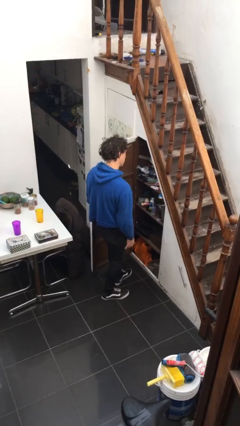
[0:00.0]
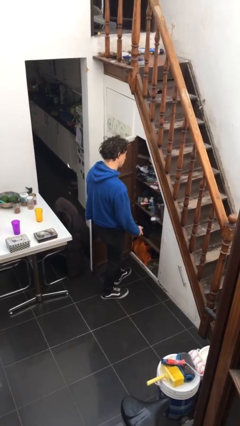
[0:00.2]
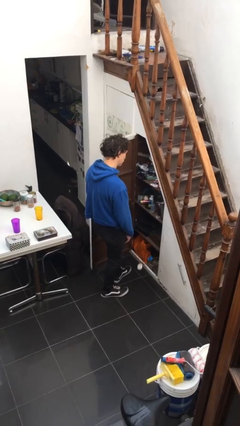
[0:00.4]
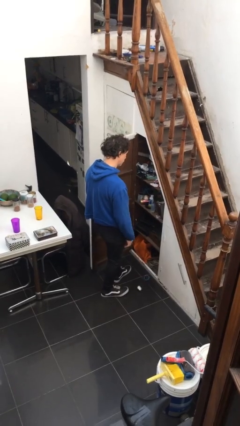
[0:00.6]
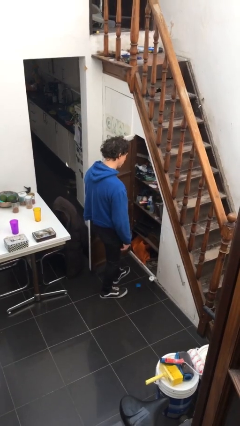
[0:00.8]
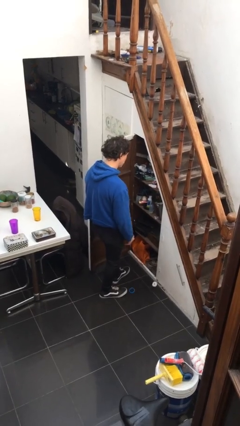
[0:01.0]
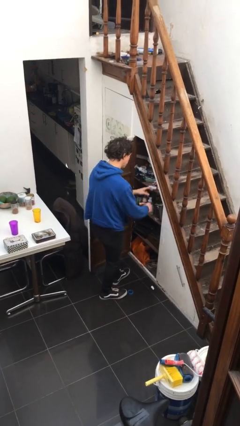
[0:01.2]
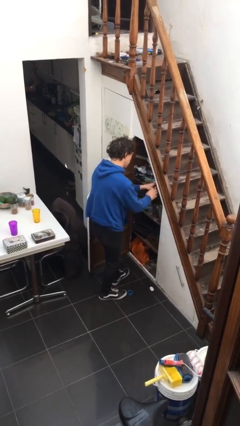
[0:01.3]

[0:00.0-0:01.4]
person searches in cabinet

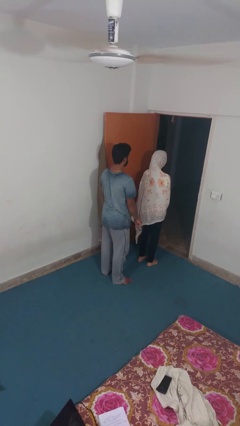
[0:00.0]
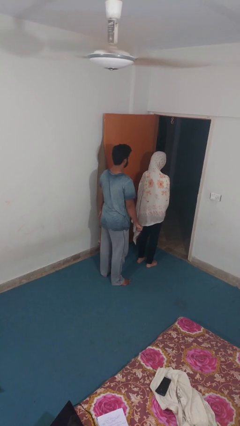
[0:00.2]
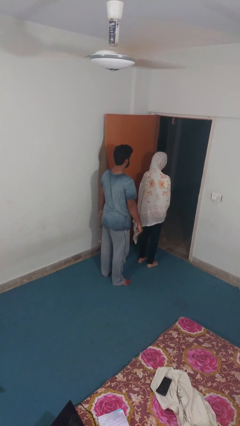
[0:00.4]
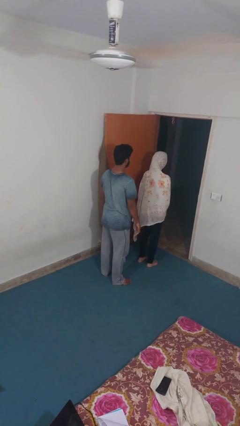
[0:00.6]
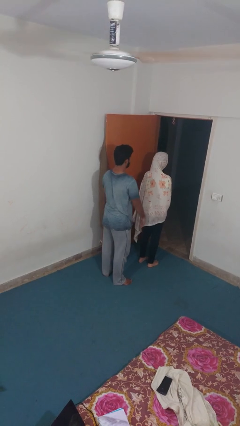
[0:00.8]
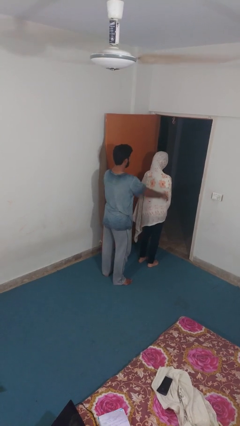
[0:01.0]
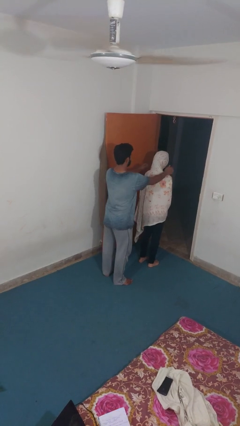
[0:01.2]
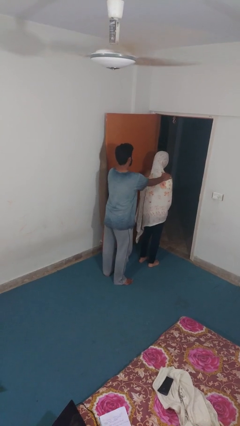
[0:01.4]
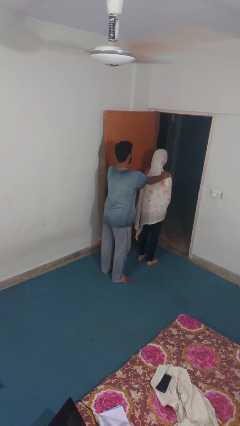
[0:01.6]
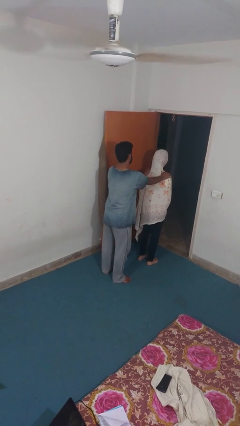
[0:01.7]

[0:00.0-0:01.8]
person grabs person by shoulder

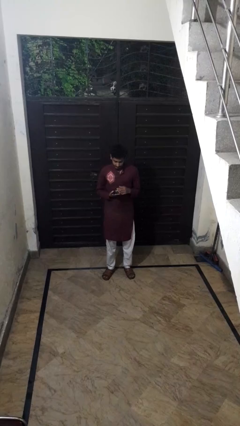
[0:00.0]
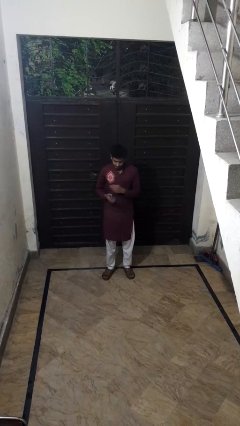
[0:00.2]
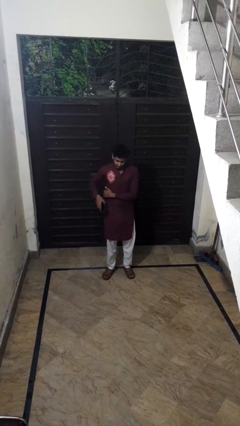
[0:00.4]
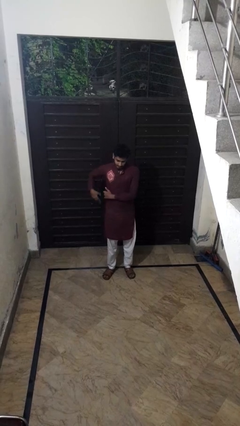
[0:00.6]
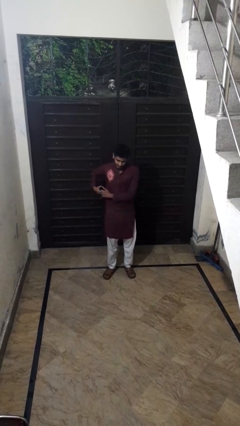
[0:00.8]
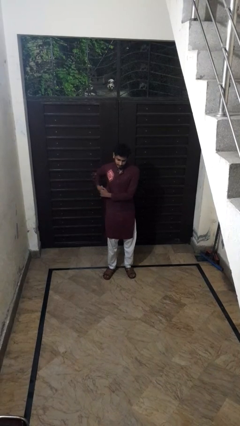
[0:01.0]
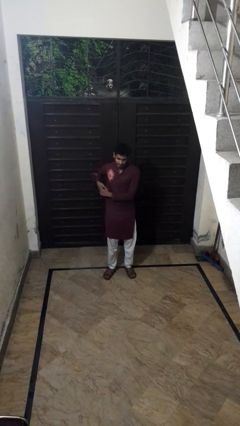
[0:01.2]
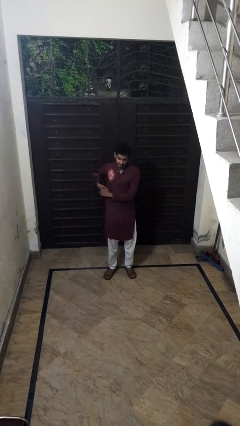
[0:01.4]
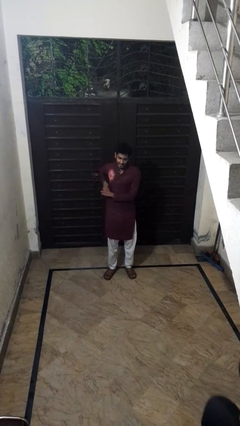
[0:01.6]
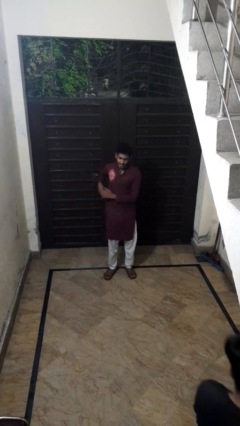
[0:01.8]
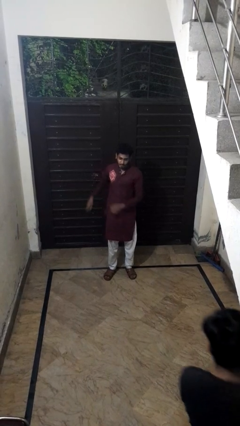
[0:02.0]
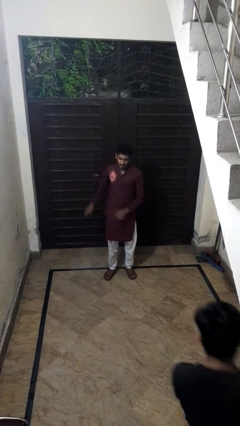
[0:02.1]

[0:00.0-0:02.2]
person puts phone into pocket

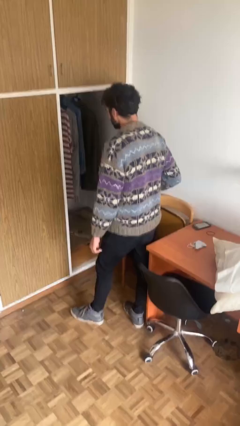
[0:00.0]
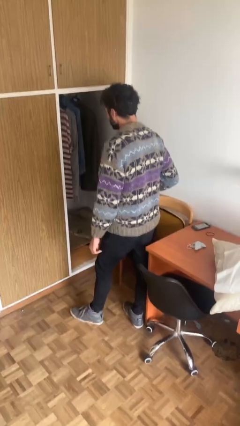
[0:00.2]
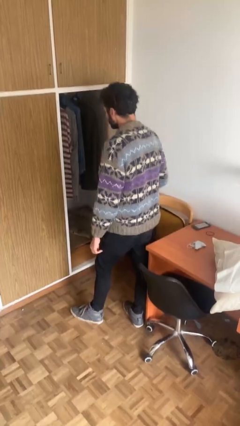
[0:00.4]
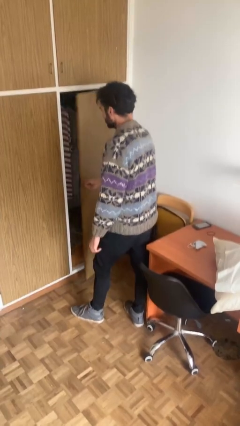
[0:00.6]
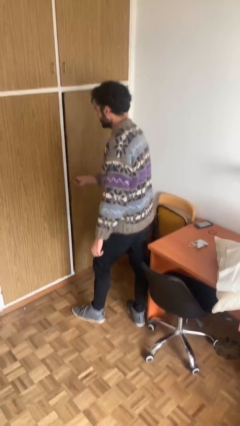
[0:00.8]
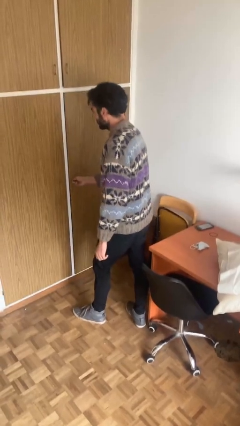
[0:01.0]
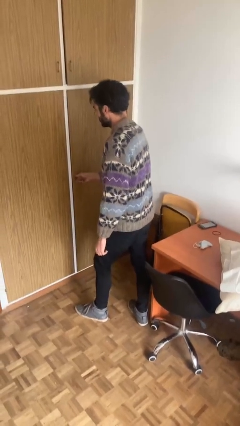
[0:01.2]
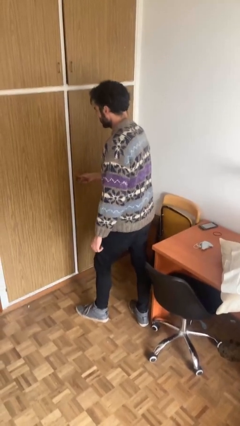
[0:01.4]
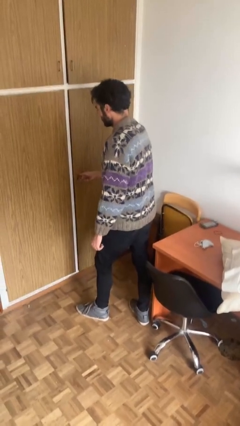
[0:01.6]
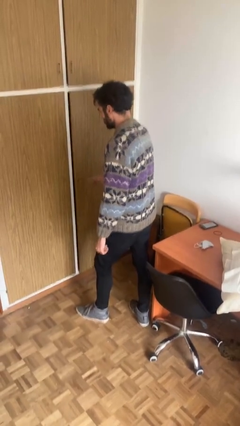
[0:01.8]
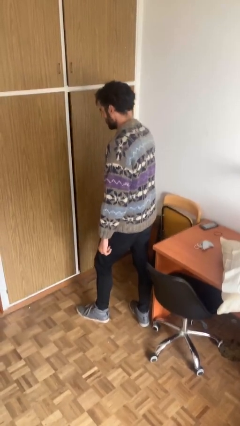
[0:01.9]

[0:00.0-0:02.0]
person closes closet door

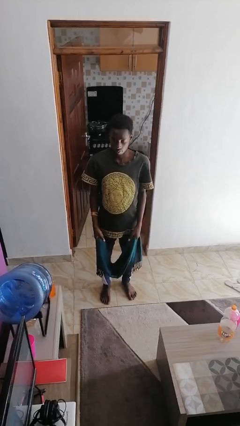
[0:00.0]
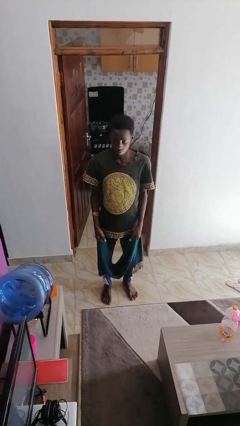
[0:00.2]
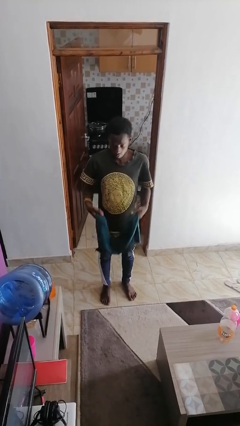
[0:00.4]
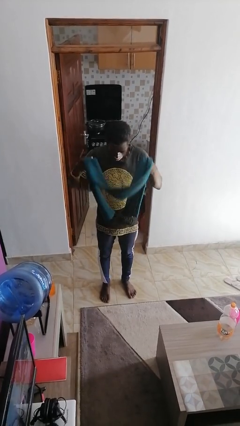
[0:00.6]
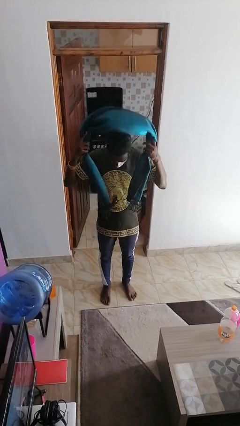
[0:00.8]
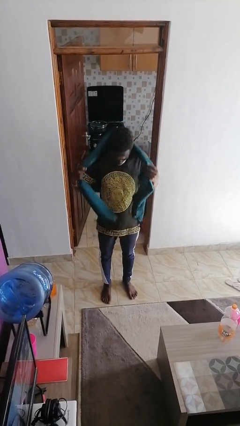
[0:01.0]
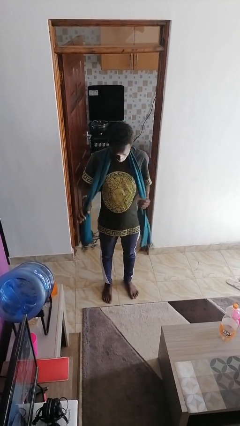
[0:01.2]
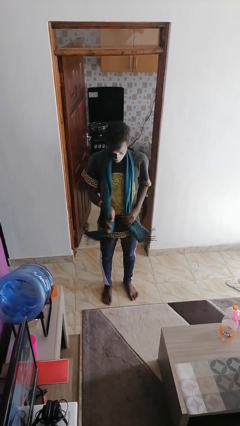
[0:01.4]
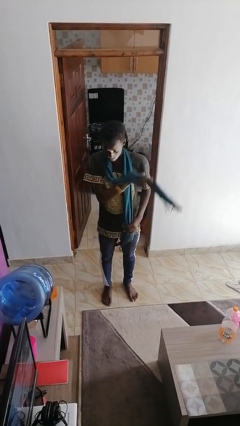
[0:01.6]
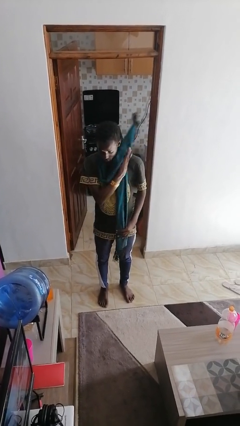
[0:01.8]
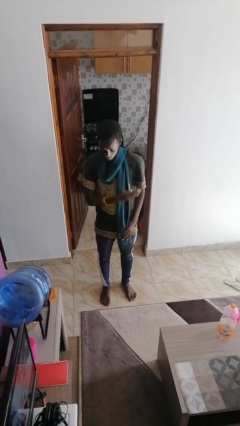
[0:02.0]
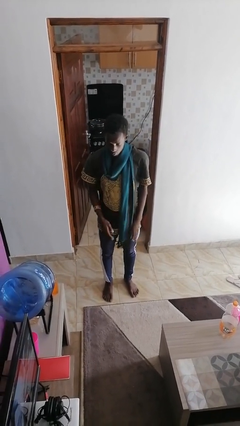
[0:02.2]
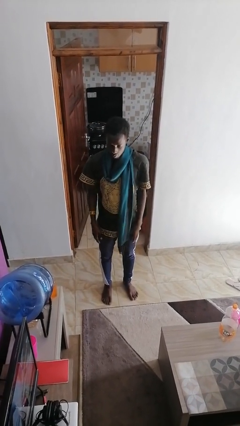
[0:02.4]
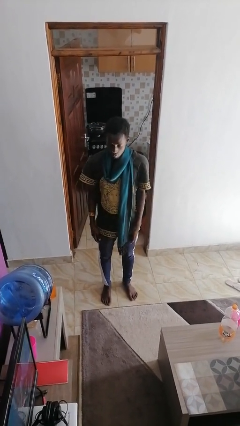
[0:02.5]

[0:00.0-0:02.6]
person puts on scarf

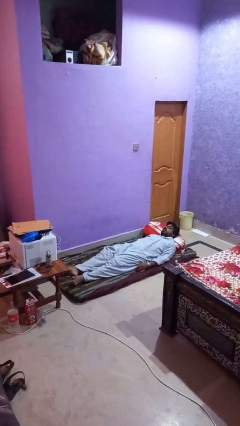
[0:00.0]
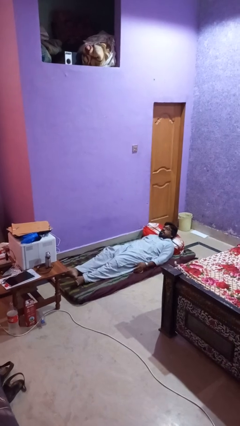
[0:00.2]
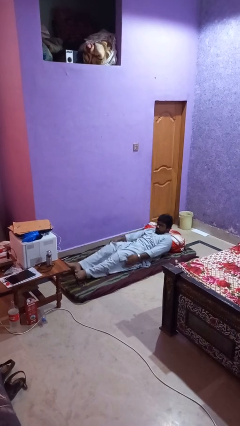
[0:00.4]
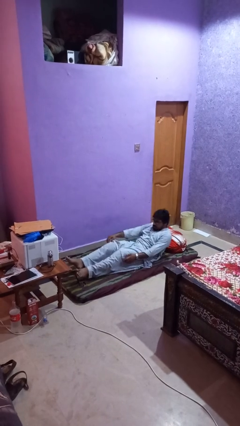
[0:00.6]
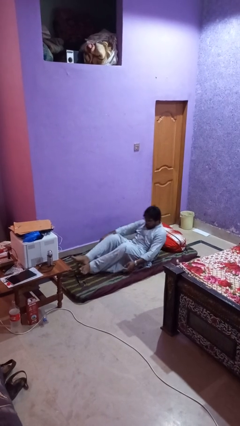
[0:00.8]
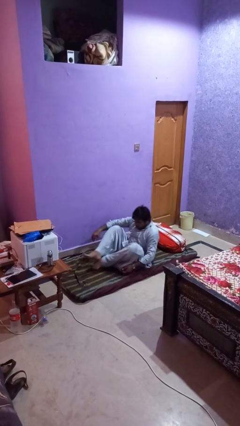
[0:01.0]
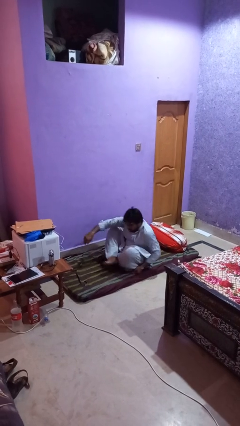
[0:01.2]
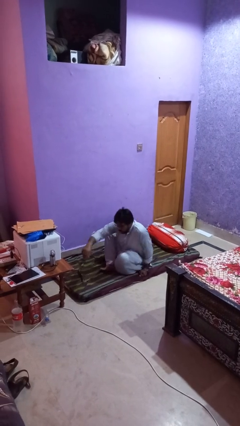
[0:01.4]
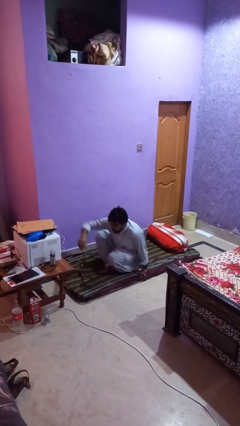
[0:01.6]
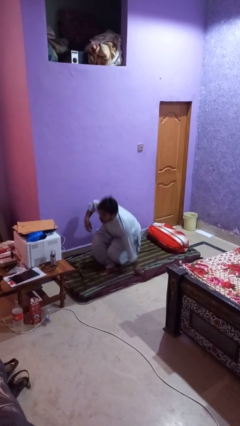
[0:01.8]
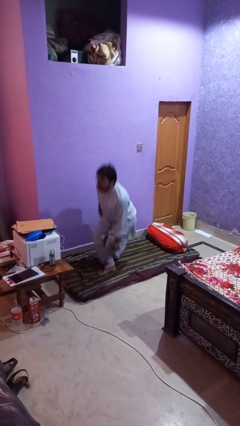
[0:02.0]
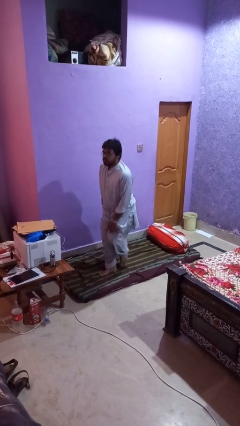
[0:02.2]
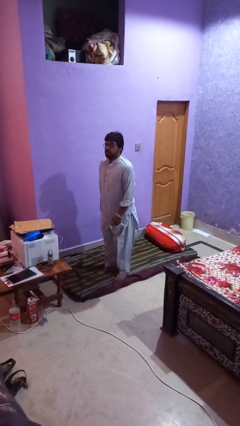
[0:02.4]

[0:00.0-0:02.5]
person stands up

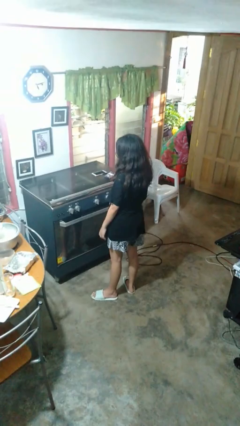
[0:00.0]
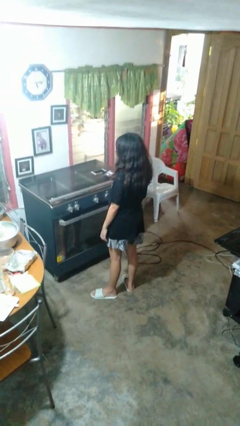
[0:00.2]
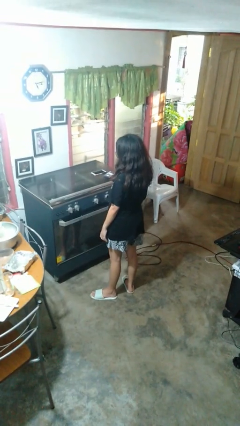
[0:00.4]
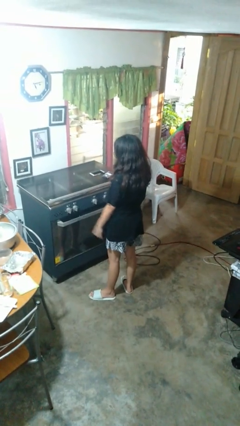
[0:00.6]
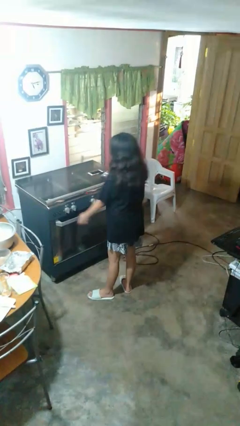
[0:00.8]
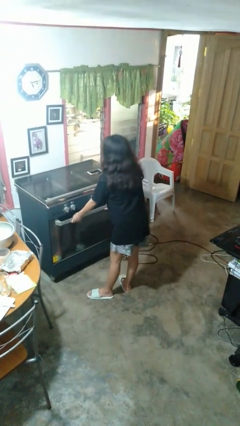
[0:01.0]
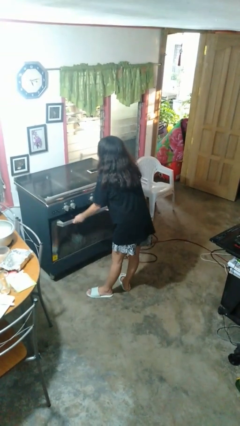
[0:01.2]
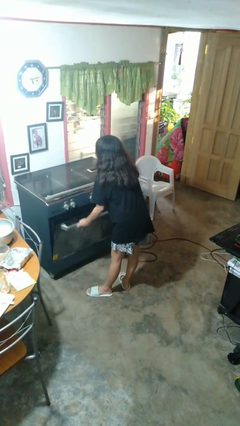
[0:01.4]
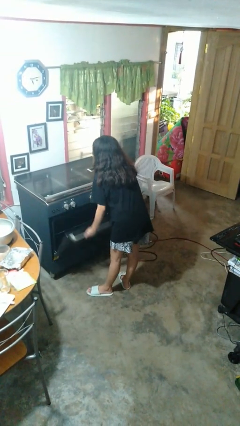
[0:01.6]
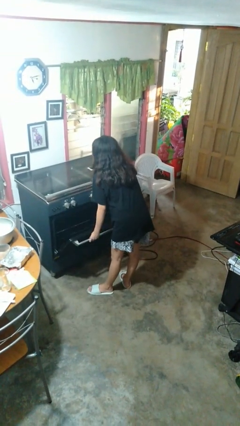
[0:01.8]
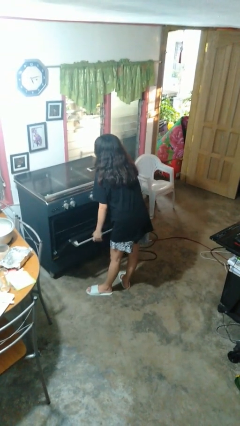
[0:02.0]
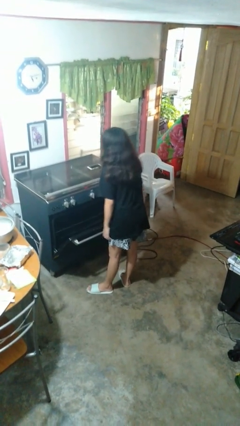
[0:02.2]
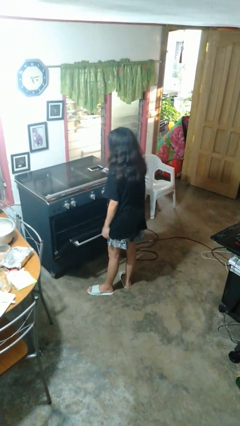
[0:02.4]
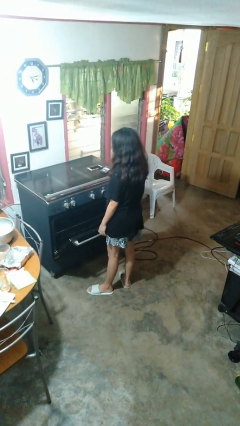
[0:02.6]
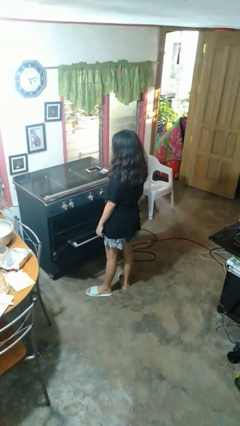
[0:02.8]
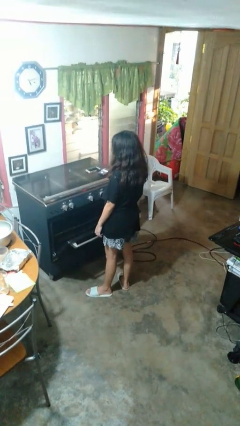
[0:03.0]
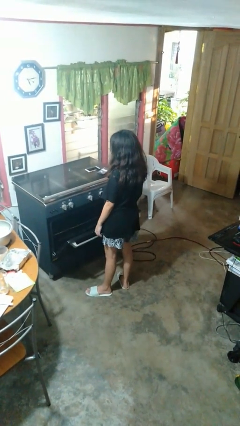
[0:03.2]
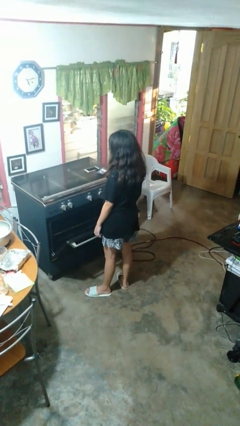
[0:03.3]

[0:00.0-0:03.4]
person opens oven door

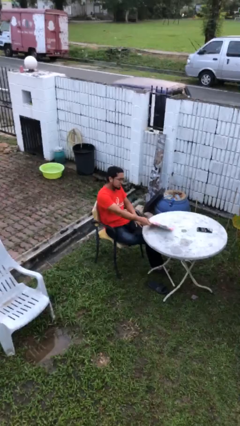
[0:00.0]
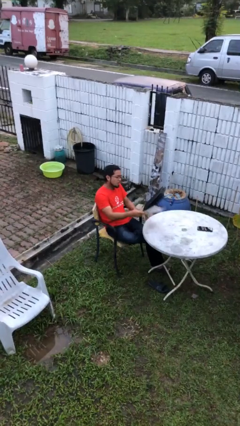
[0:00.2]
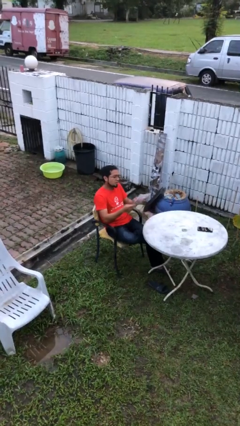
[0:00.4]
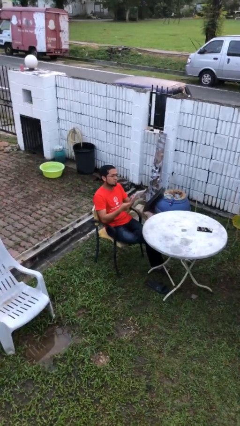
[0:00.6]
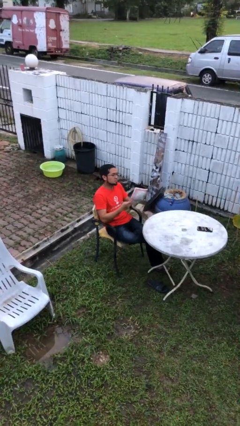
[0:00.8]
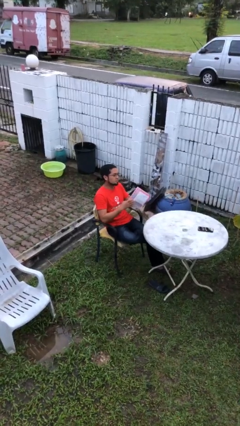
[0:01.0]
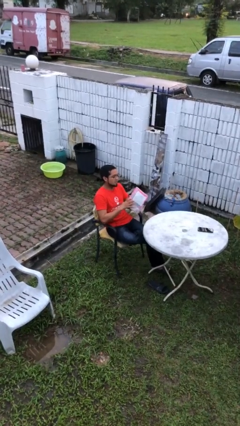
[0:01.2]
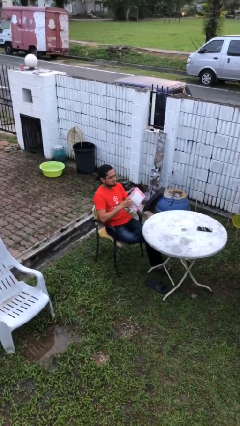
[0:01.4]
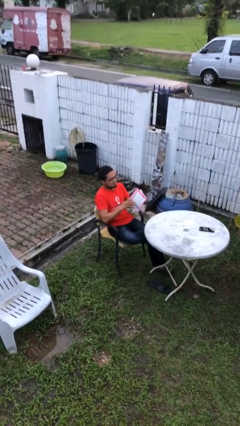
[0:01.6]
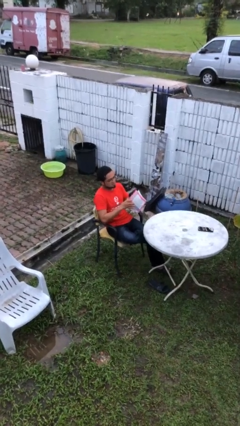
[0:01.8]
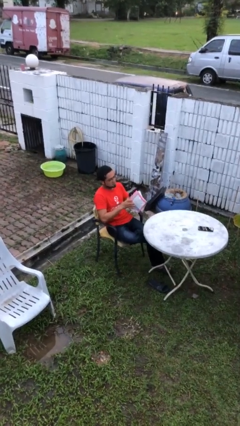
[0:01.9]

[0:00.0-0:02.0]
person picks up object from table
